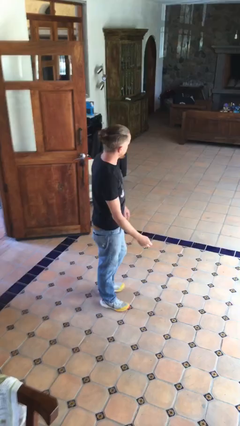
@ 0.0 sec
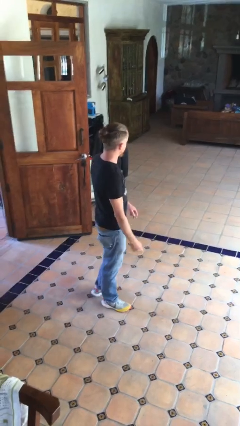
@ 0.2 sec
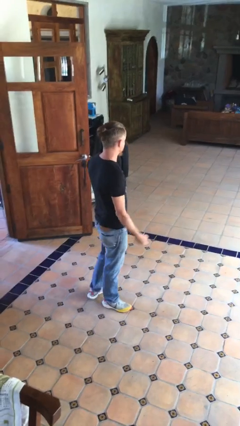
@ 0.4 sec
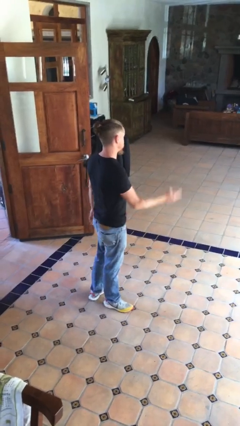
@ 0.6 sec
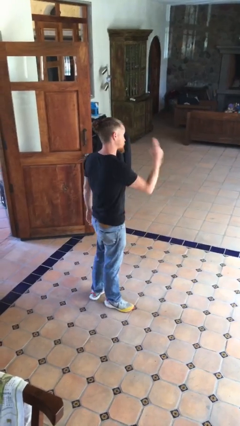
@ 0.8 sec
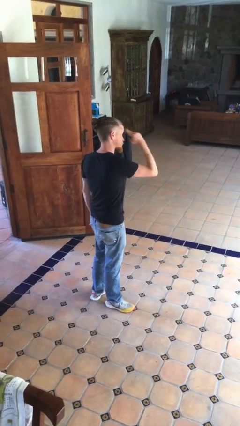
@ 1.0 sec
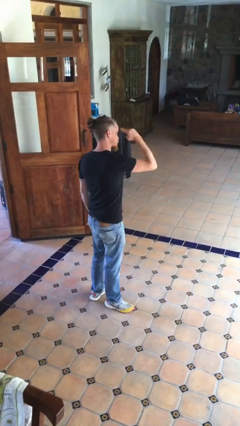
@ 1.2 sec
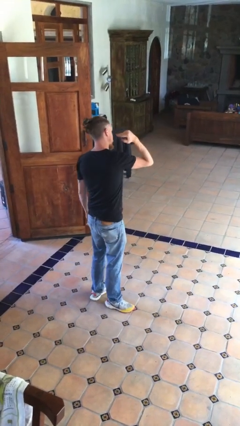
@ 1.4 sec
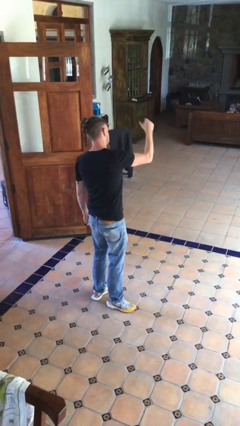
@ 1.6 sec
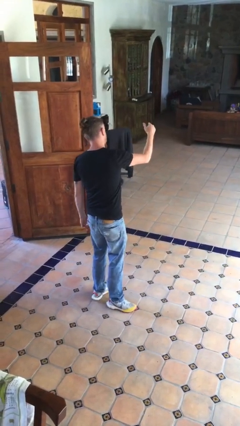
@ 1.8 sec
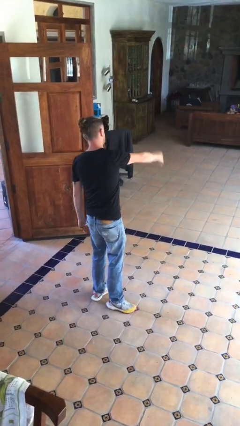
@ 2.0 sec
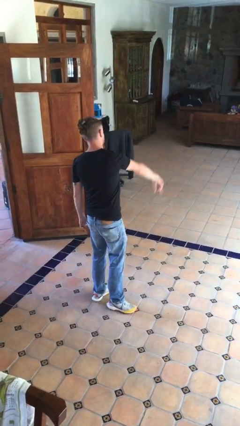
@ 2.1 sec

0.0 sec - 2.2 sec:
person salutes

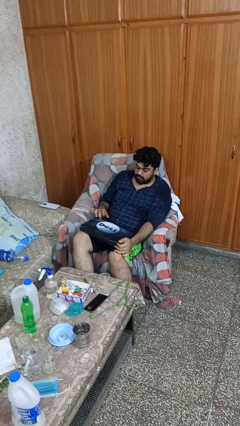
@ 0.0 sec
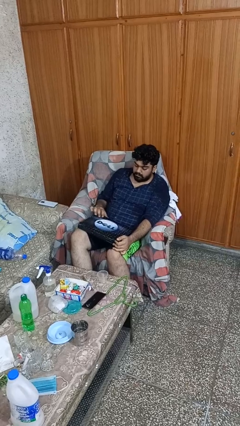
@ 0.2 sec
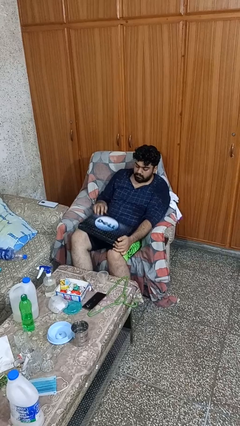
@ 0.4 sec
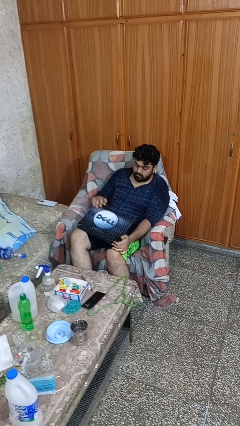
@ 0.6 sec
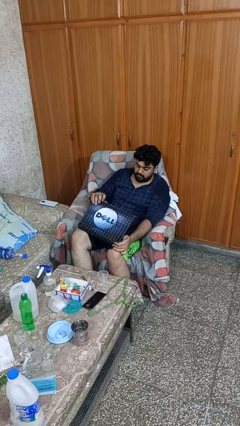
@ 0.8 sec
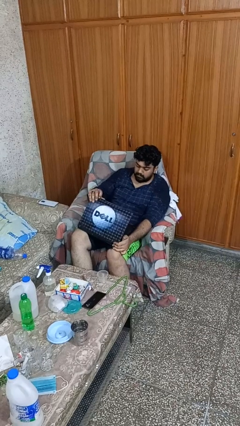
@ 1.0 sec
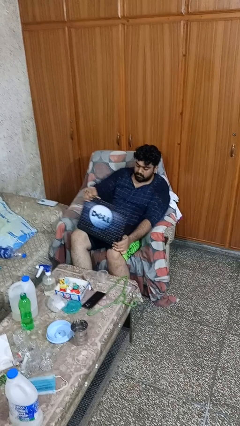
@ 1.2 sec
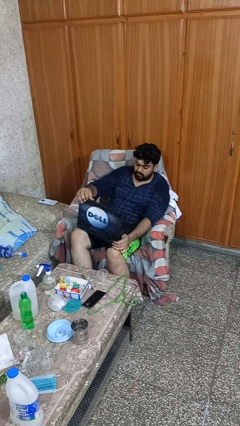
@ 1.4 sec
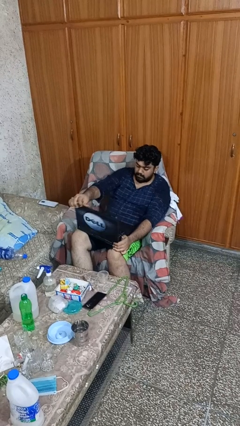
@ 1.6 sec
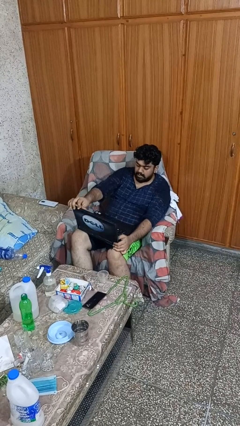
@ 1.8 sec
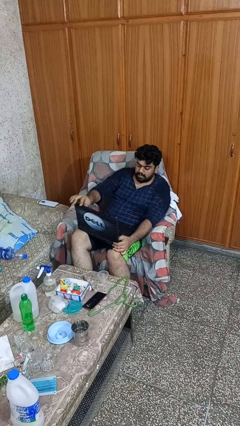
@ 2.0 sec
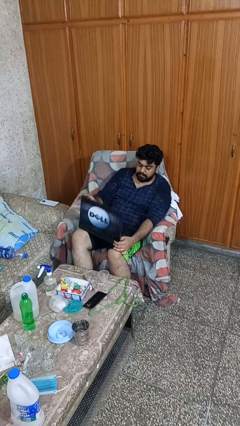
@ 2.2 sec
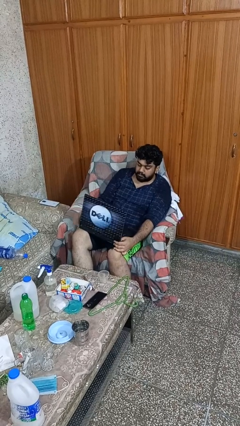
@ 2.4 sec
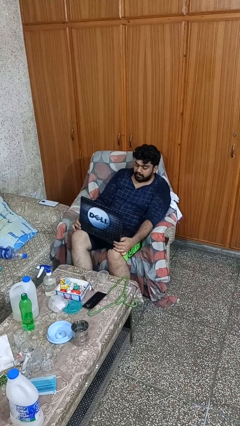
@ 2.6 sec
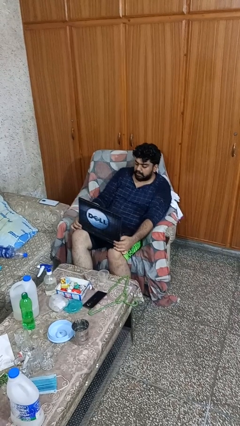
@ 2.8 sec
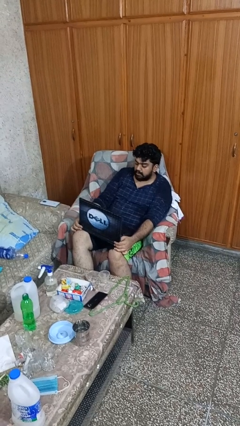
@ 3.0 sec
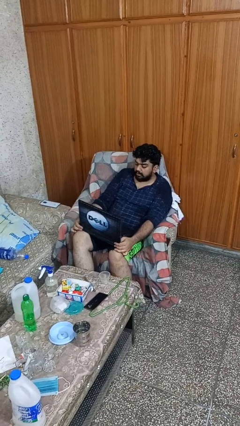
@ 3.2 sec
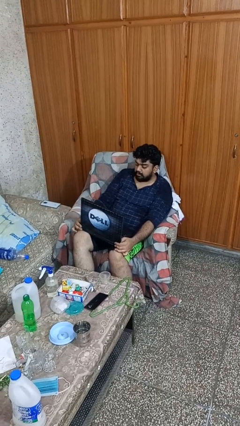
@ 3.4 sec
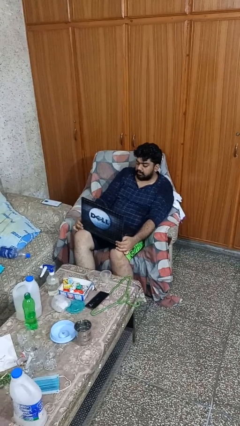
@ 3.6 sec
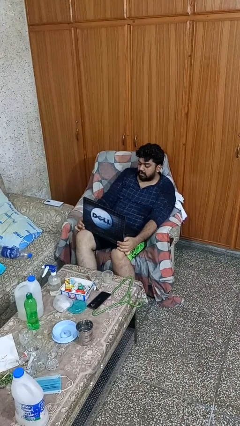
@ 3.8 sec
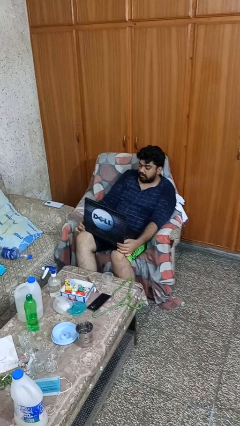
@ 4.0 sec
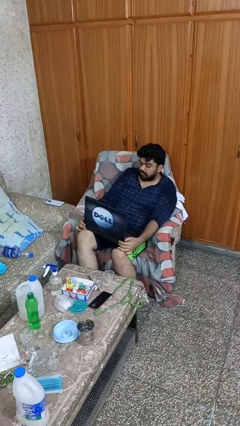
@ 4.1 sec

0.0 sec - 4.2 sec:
person opens laptop

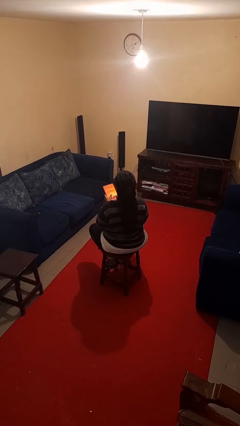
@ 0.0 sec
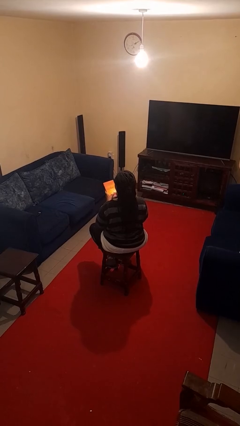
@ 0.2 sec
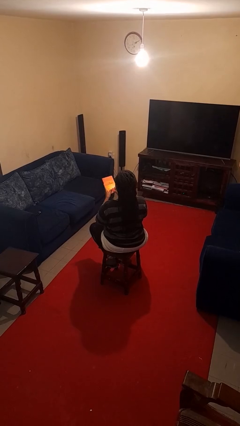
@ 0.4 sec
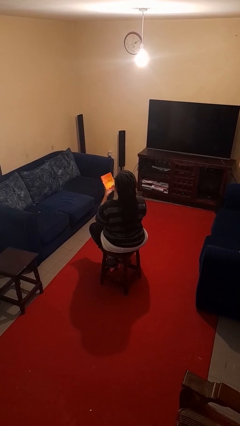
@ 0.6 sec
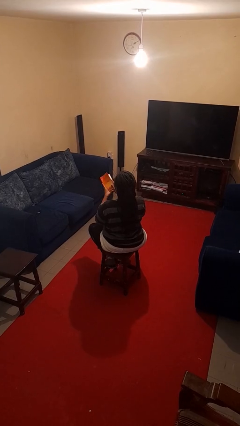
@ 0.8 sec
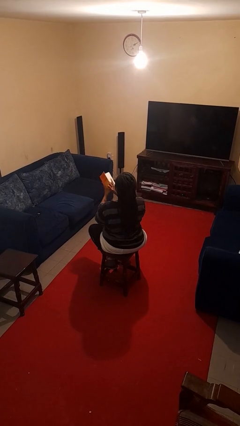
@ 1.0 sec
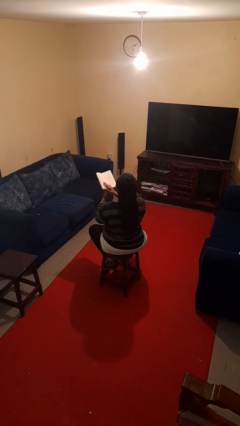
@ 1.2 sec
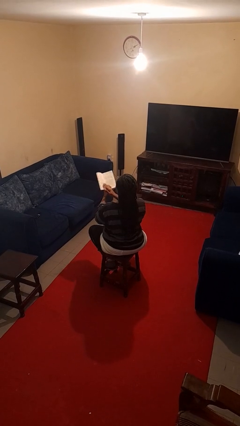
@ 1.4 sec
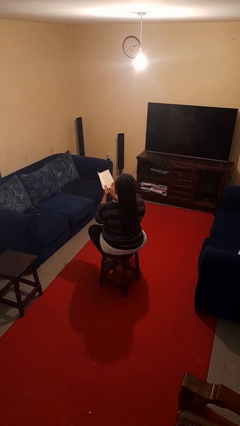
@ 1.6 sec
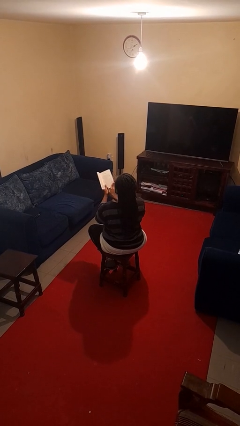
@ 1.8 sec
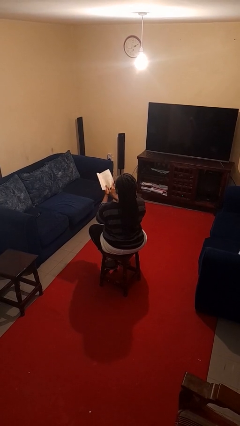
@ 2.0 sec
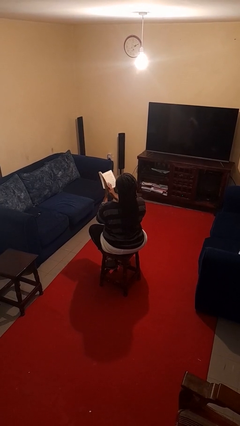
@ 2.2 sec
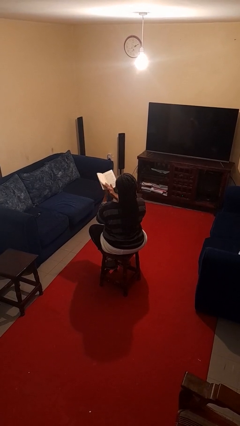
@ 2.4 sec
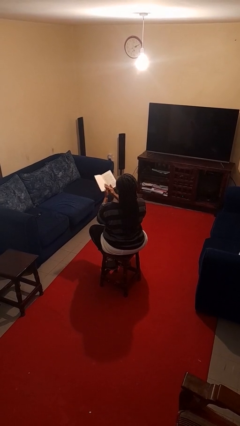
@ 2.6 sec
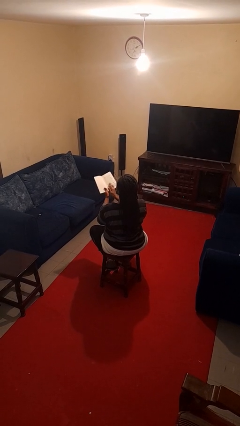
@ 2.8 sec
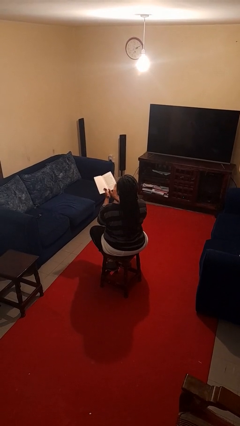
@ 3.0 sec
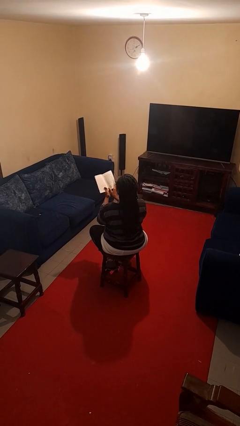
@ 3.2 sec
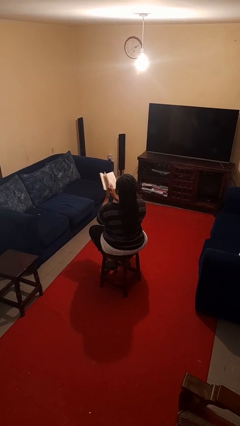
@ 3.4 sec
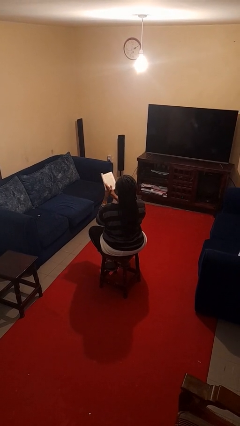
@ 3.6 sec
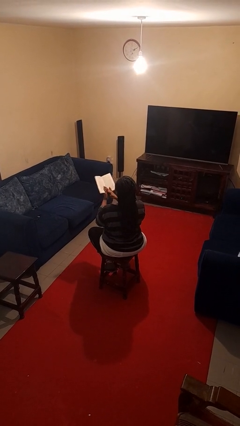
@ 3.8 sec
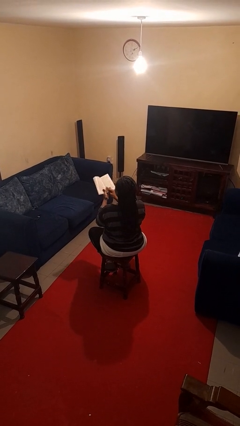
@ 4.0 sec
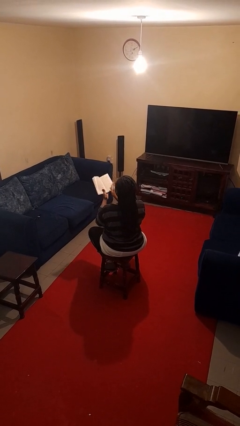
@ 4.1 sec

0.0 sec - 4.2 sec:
person reads book

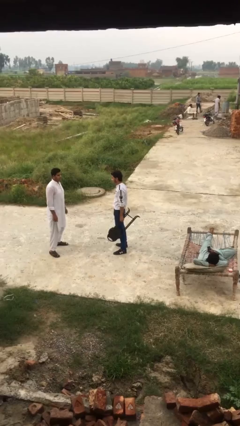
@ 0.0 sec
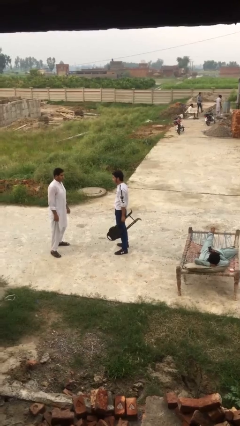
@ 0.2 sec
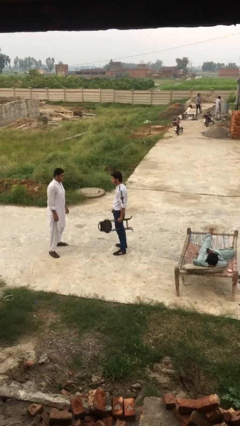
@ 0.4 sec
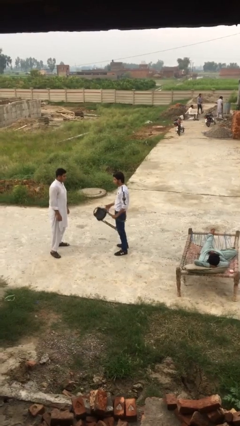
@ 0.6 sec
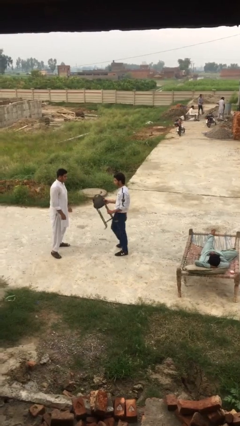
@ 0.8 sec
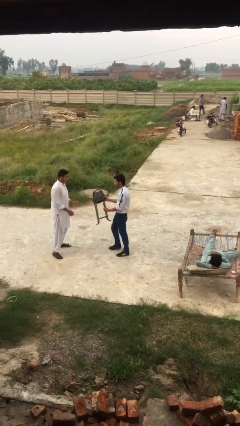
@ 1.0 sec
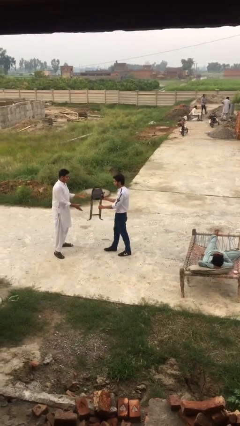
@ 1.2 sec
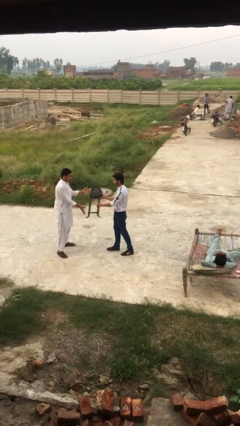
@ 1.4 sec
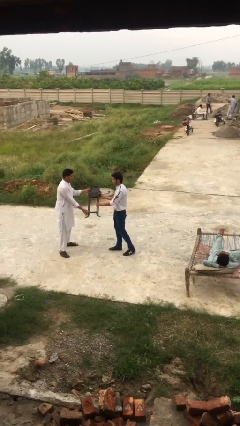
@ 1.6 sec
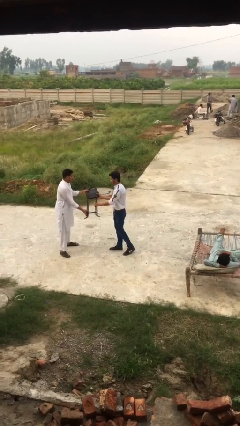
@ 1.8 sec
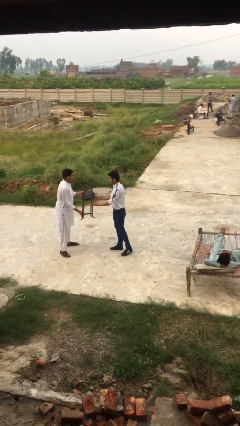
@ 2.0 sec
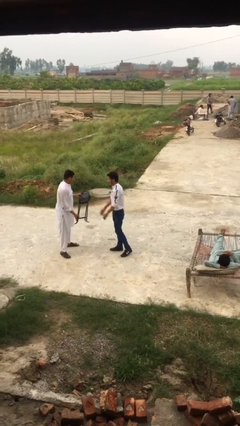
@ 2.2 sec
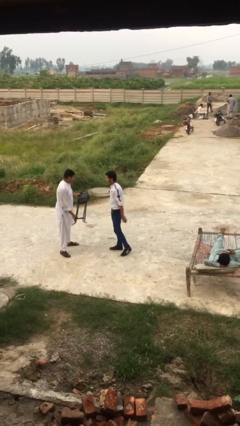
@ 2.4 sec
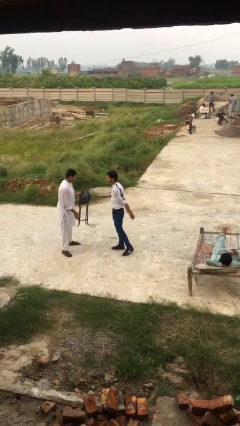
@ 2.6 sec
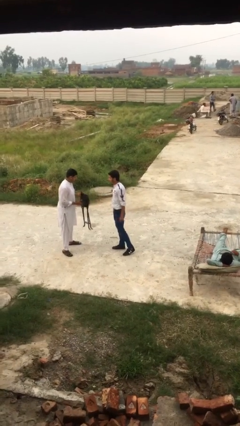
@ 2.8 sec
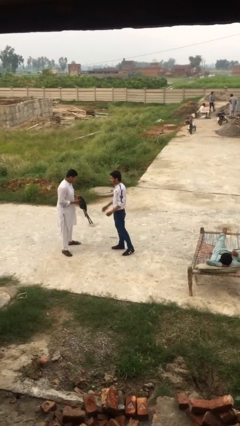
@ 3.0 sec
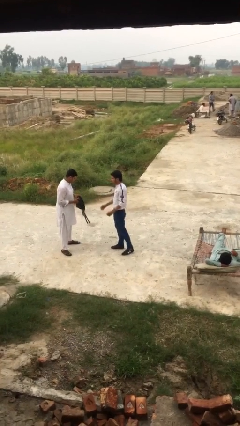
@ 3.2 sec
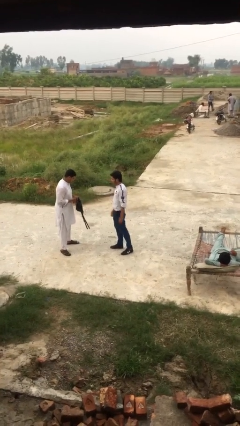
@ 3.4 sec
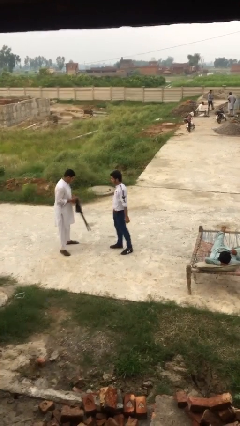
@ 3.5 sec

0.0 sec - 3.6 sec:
person transfers object to person

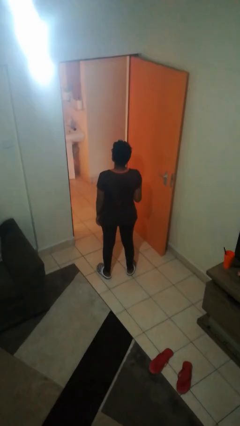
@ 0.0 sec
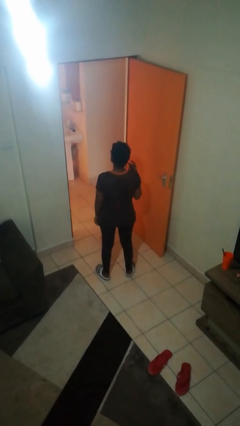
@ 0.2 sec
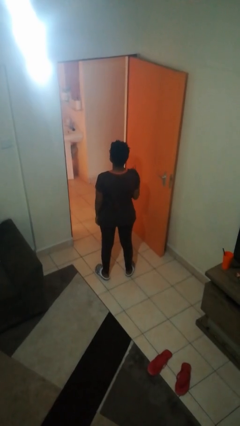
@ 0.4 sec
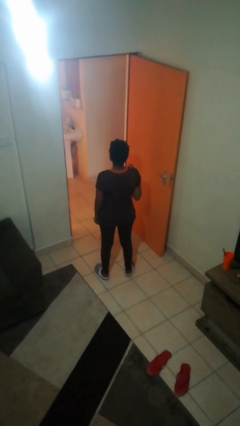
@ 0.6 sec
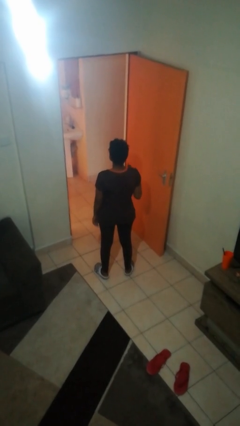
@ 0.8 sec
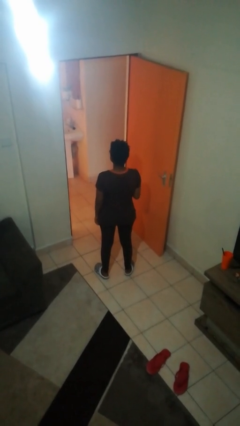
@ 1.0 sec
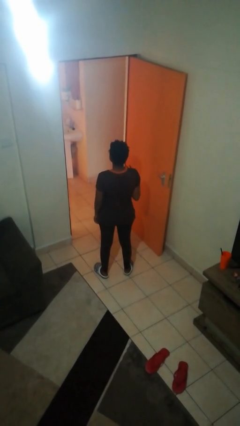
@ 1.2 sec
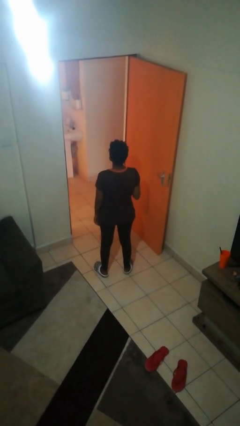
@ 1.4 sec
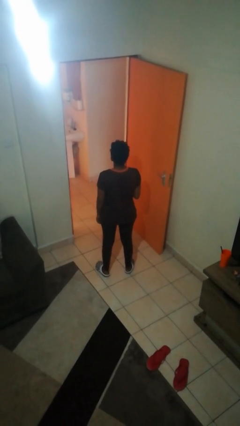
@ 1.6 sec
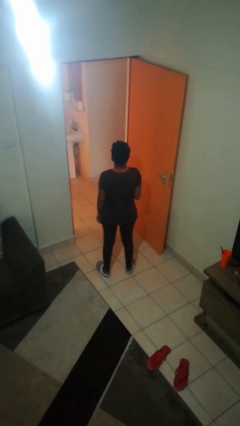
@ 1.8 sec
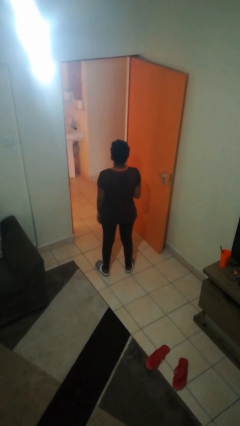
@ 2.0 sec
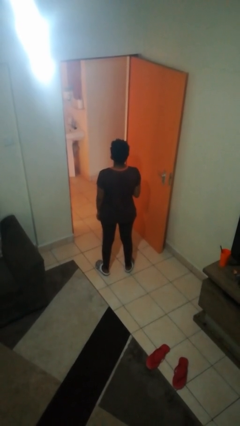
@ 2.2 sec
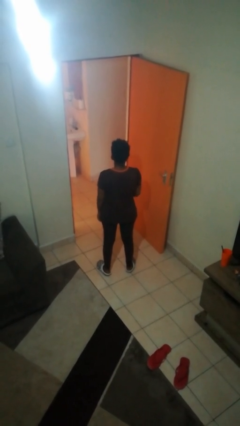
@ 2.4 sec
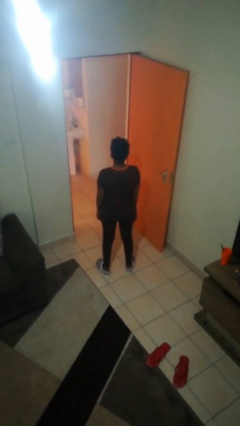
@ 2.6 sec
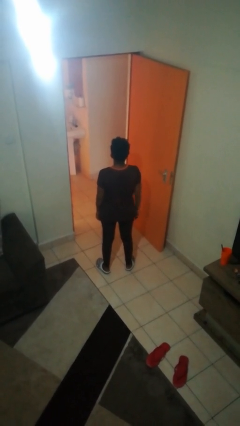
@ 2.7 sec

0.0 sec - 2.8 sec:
person snaps fingers

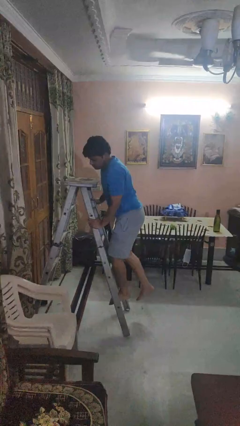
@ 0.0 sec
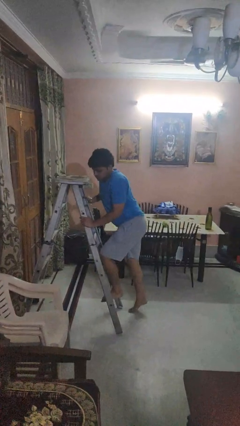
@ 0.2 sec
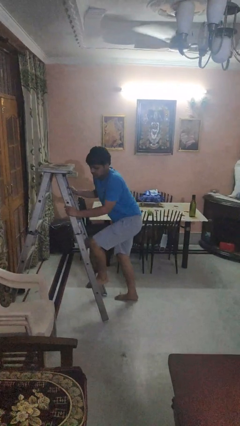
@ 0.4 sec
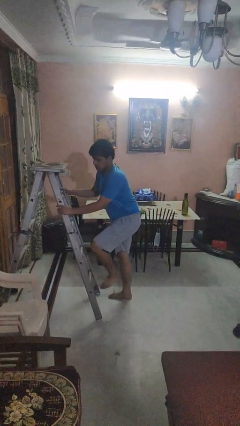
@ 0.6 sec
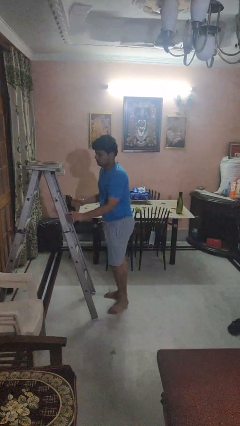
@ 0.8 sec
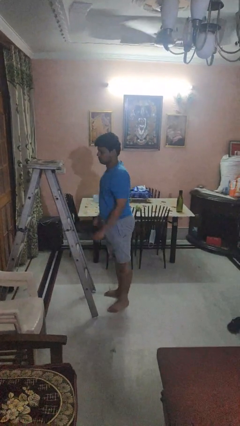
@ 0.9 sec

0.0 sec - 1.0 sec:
person climbs down ladder
